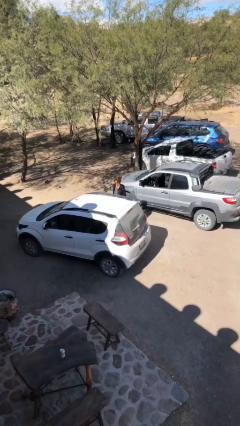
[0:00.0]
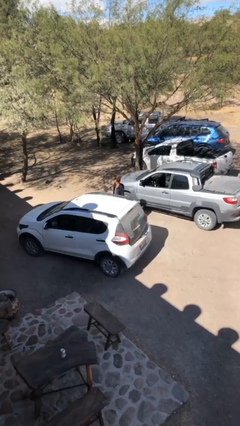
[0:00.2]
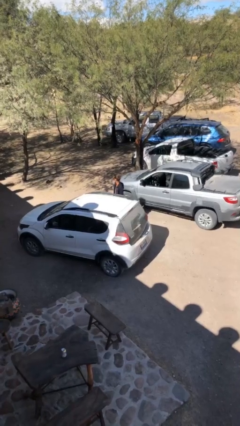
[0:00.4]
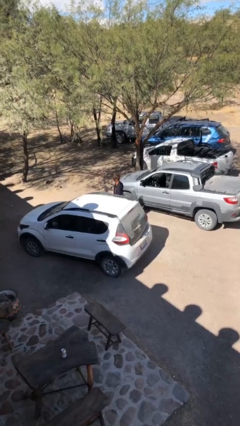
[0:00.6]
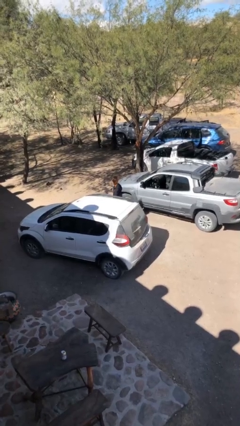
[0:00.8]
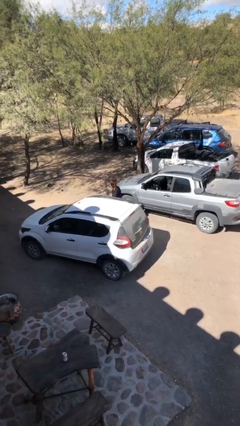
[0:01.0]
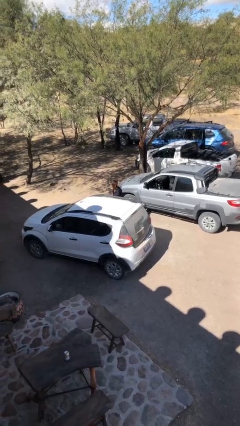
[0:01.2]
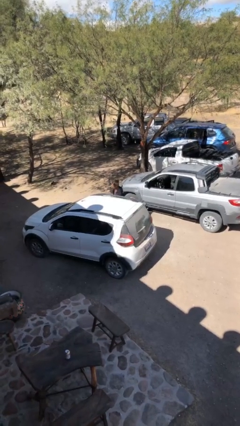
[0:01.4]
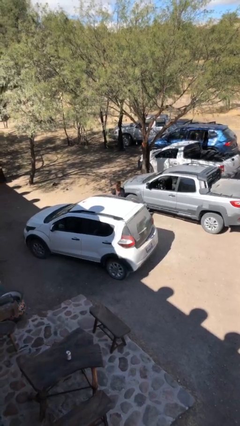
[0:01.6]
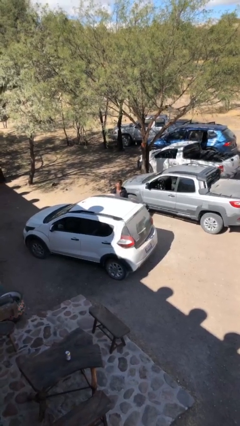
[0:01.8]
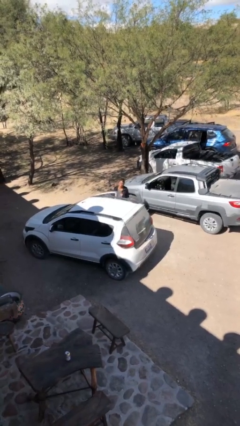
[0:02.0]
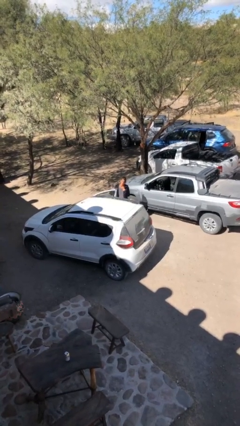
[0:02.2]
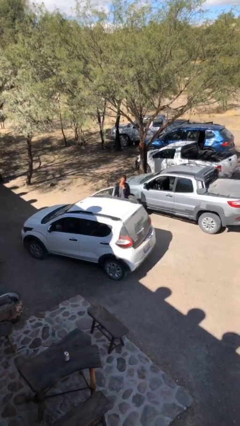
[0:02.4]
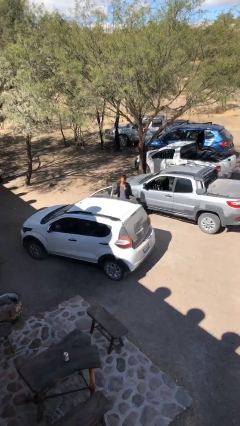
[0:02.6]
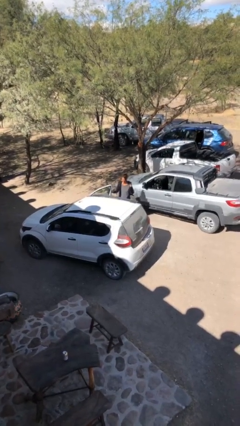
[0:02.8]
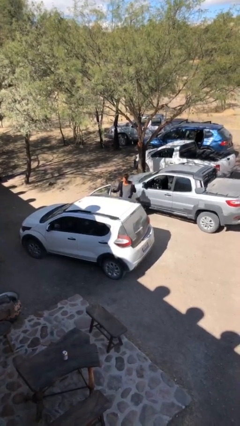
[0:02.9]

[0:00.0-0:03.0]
person opens car door

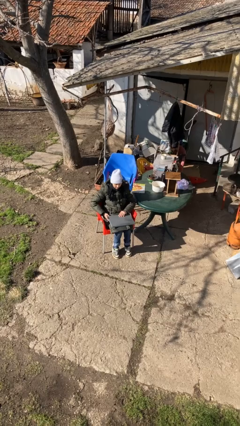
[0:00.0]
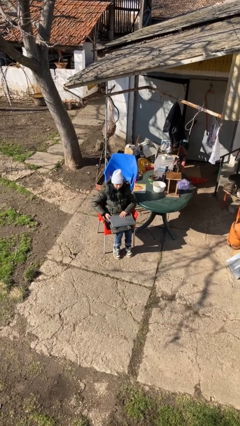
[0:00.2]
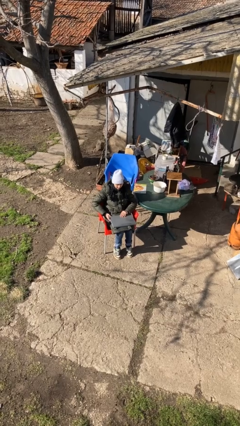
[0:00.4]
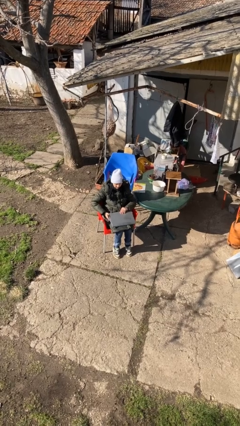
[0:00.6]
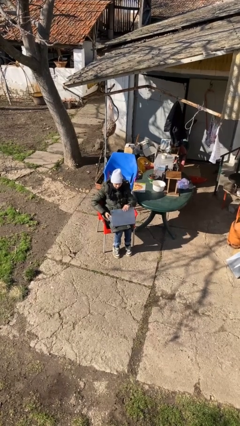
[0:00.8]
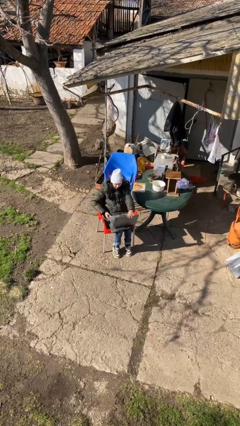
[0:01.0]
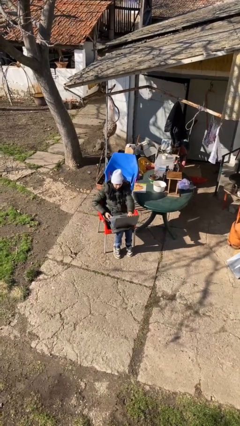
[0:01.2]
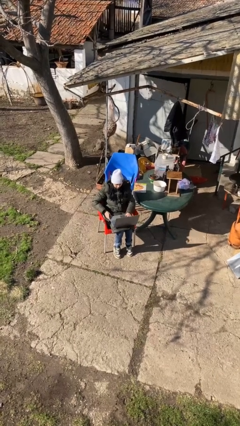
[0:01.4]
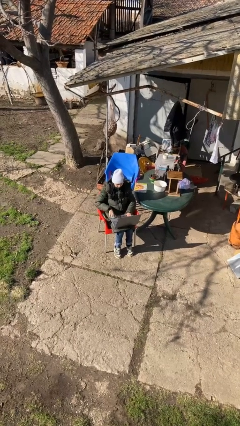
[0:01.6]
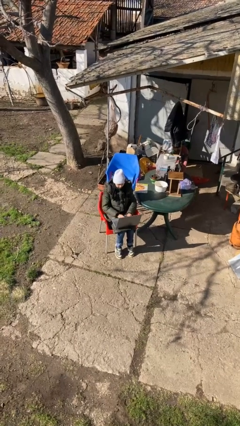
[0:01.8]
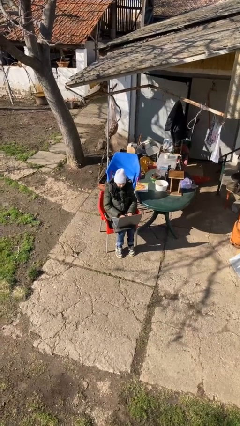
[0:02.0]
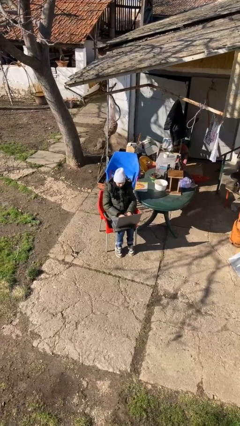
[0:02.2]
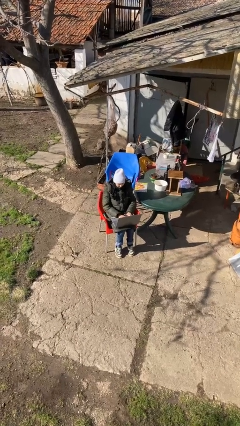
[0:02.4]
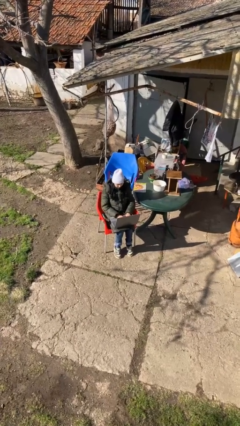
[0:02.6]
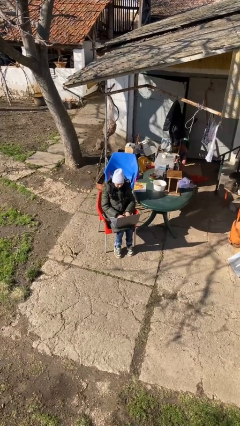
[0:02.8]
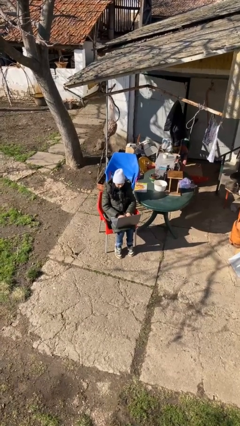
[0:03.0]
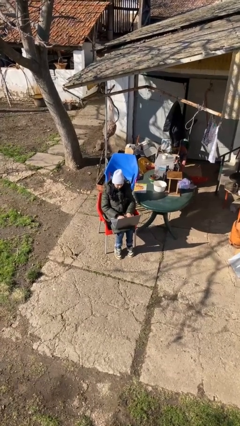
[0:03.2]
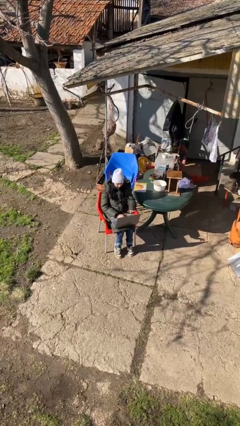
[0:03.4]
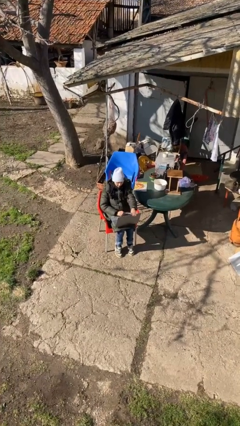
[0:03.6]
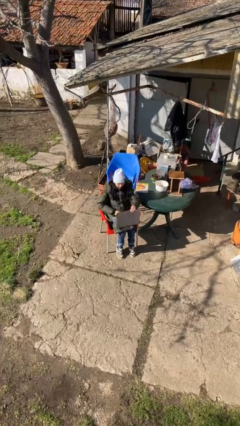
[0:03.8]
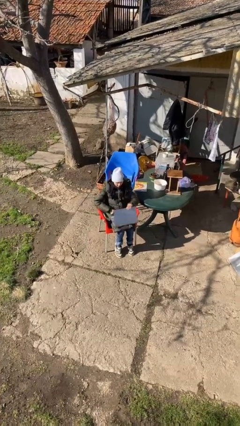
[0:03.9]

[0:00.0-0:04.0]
person interacts with laptop

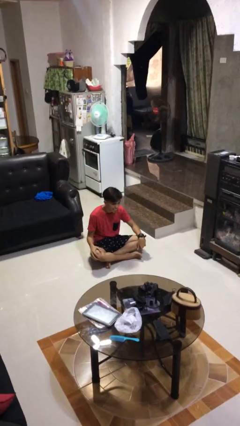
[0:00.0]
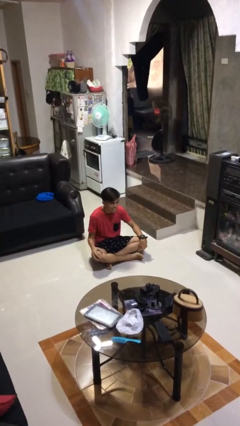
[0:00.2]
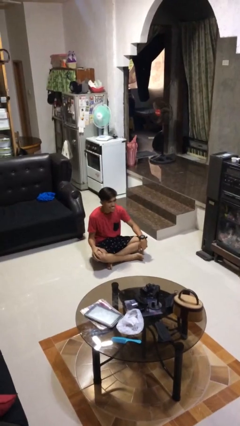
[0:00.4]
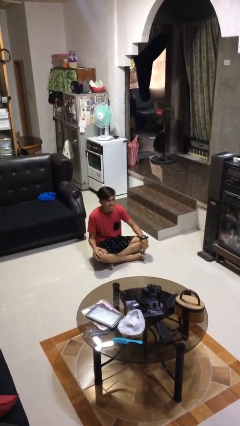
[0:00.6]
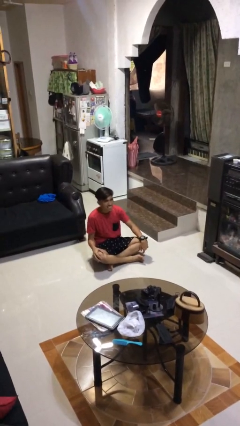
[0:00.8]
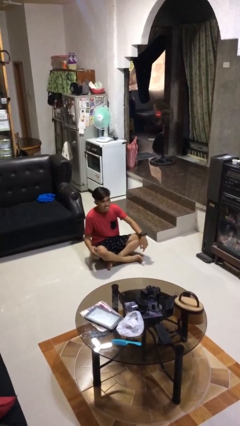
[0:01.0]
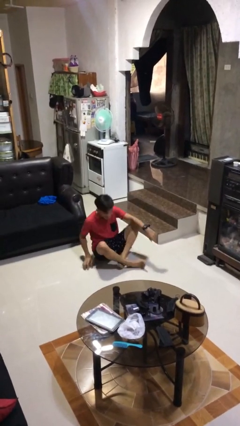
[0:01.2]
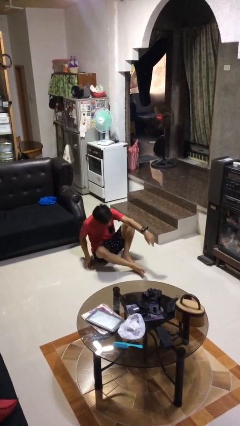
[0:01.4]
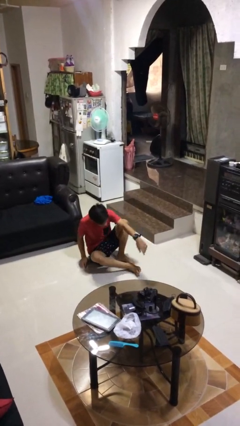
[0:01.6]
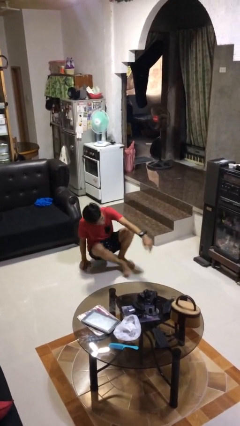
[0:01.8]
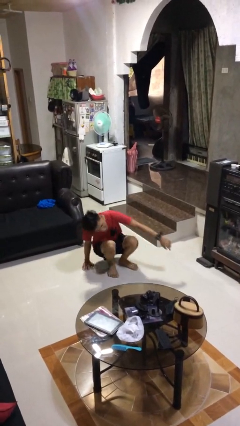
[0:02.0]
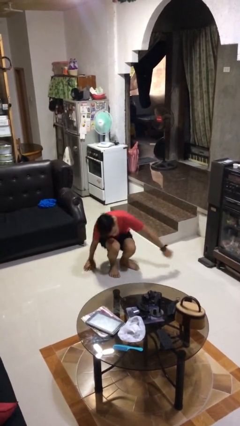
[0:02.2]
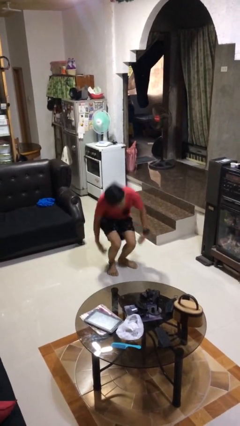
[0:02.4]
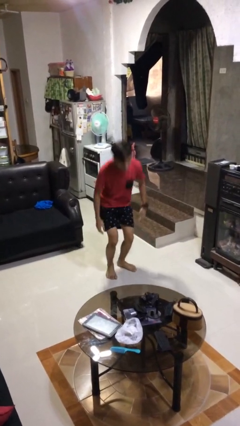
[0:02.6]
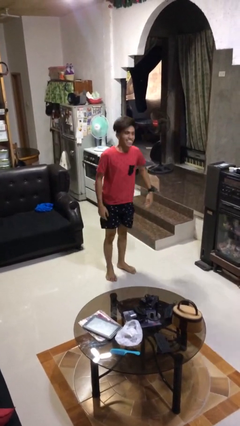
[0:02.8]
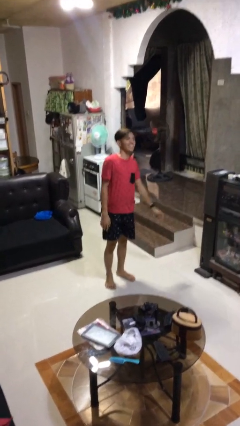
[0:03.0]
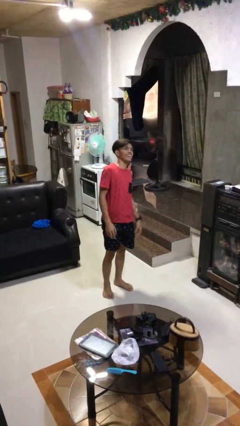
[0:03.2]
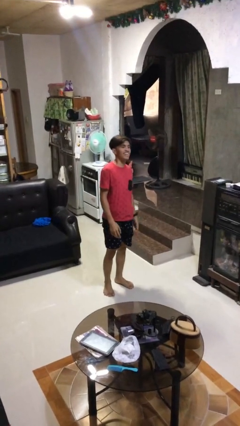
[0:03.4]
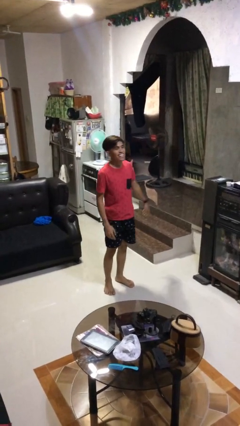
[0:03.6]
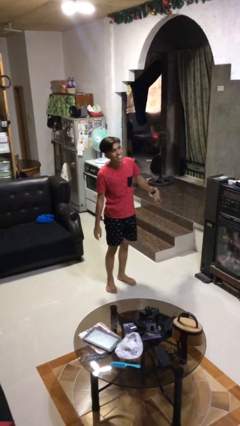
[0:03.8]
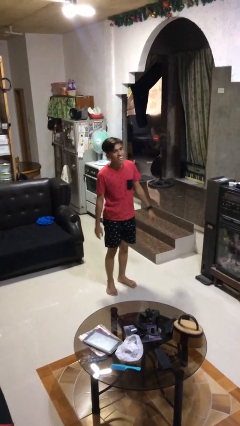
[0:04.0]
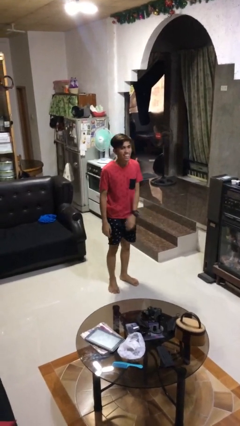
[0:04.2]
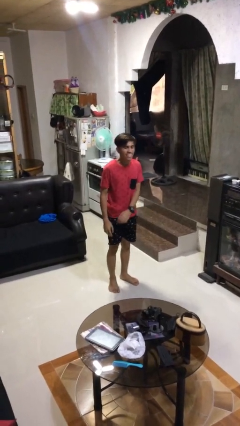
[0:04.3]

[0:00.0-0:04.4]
person stands up from floor

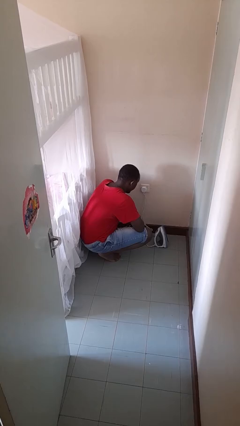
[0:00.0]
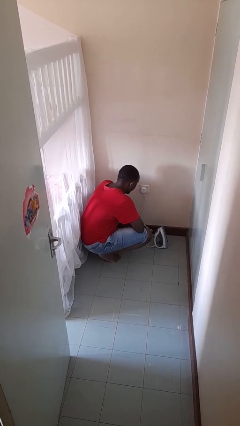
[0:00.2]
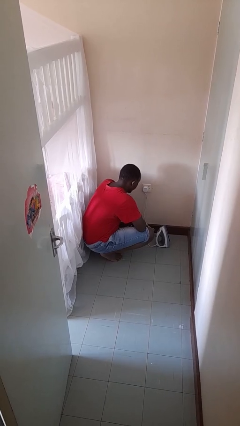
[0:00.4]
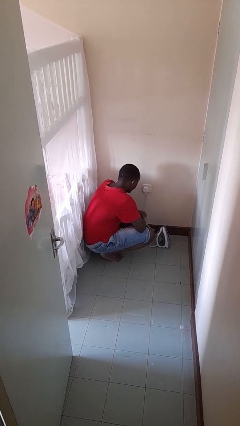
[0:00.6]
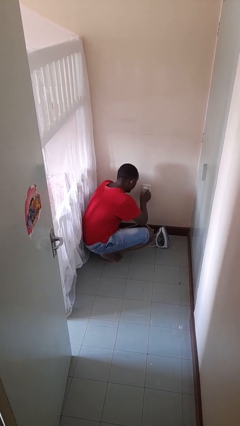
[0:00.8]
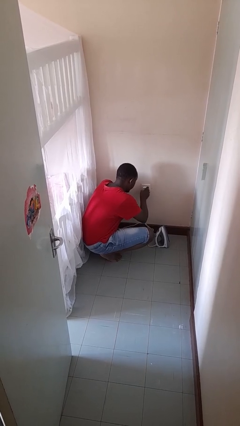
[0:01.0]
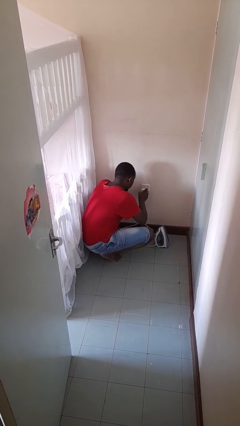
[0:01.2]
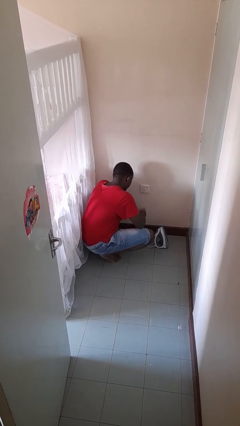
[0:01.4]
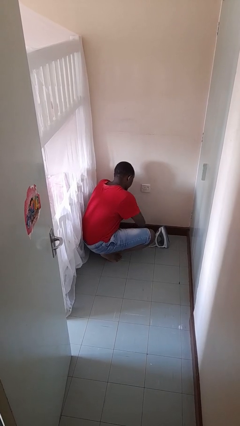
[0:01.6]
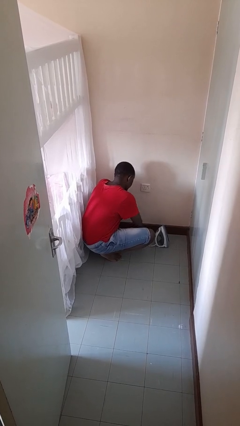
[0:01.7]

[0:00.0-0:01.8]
person unplugs from electrical socket

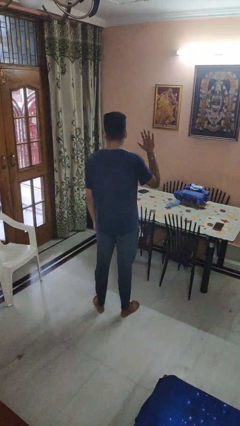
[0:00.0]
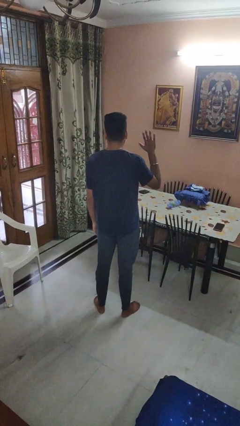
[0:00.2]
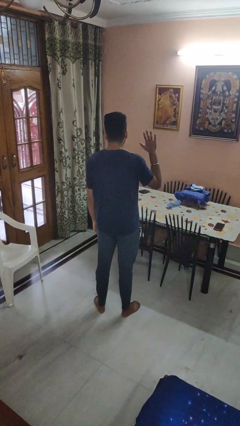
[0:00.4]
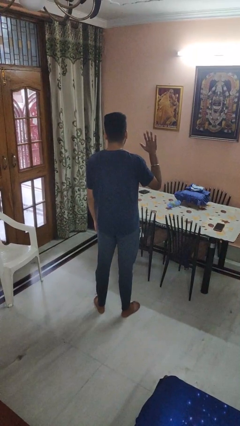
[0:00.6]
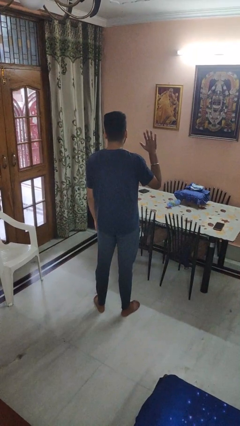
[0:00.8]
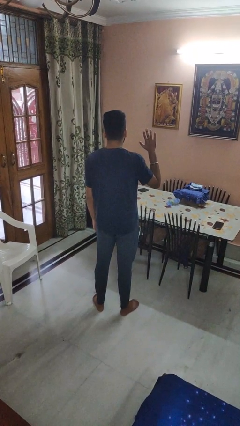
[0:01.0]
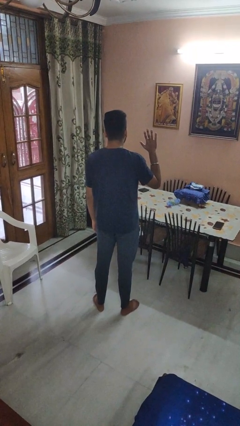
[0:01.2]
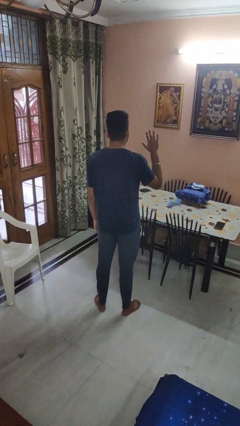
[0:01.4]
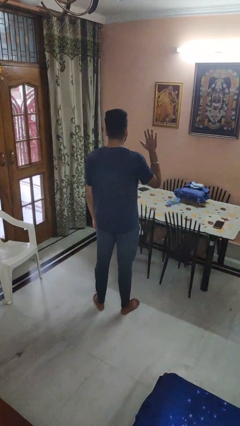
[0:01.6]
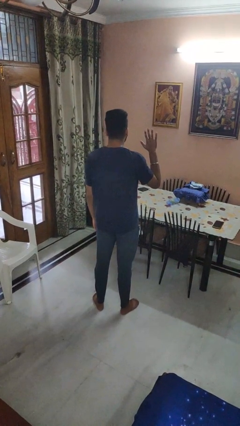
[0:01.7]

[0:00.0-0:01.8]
person gestures number five

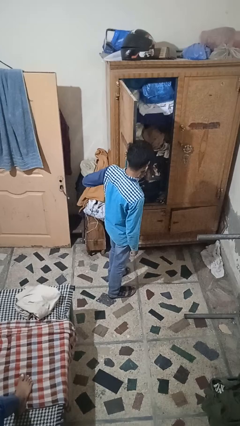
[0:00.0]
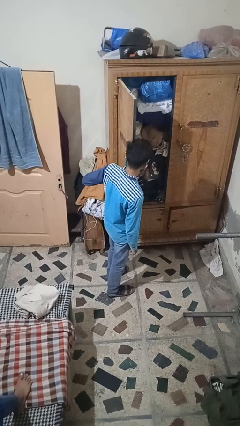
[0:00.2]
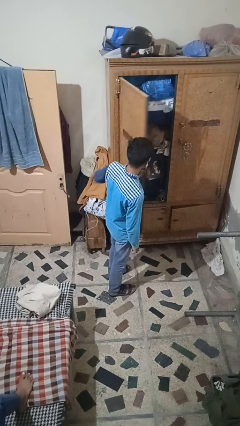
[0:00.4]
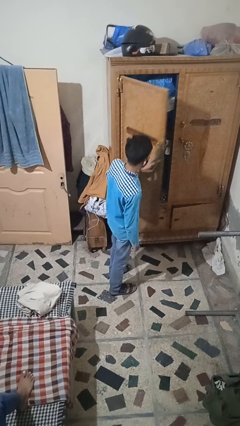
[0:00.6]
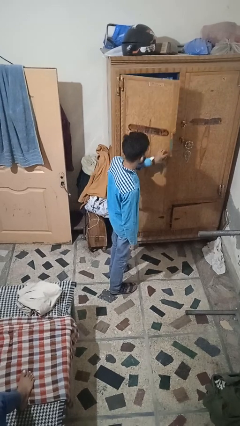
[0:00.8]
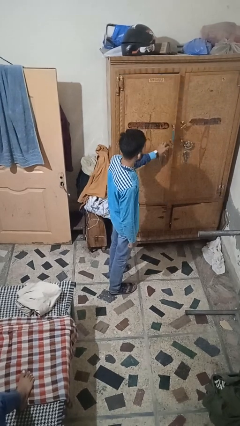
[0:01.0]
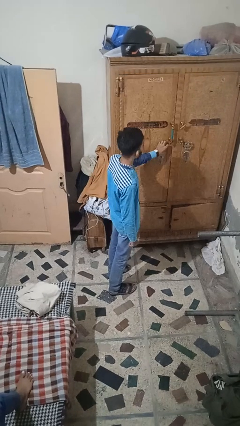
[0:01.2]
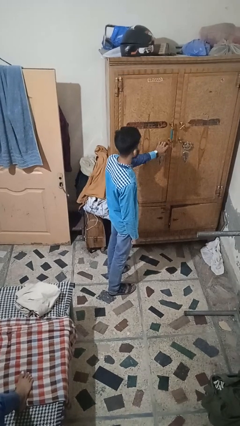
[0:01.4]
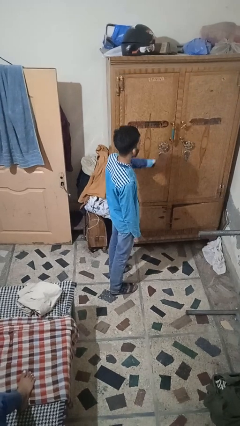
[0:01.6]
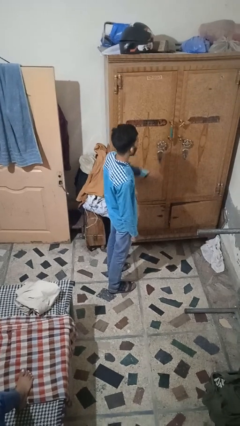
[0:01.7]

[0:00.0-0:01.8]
person closes closet door

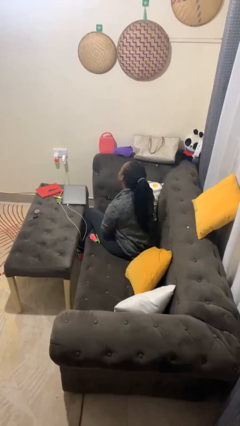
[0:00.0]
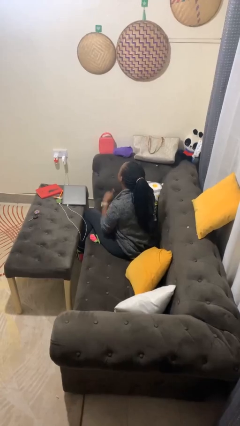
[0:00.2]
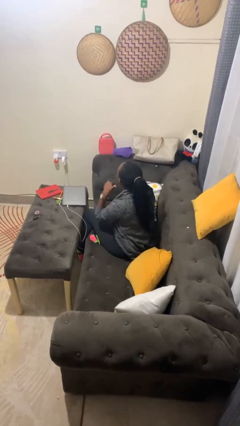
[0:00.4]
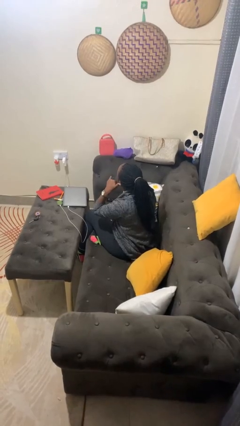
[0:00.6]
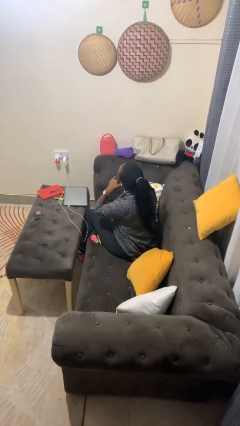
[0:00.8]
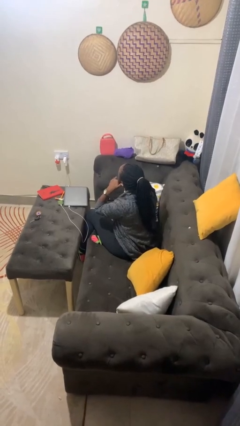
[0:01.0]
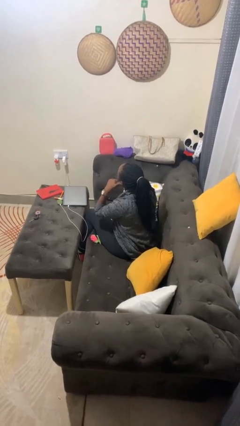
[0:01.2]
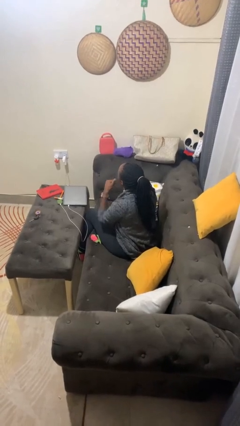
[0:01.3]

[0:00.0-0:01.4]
person gestures call me
